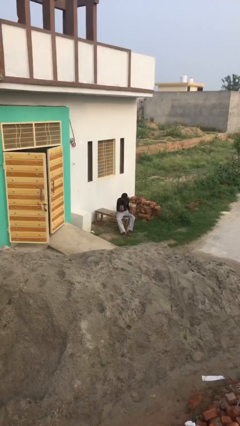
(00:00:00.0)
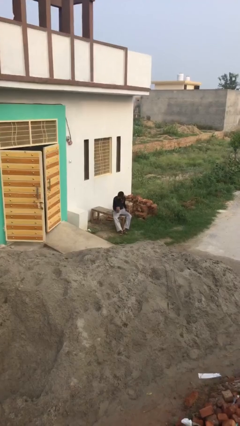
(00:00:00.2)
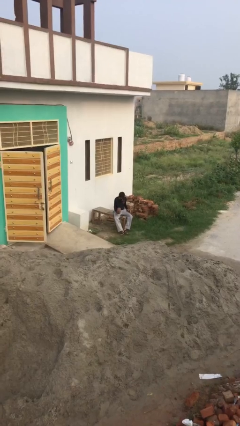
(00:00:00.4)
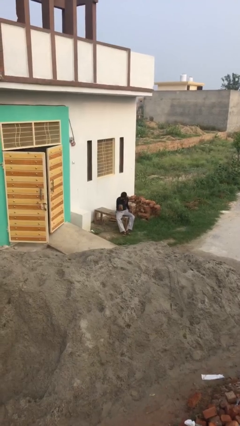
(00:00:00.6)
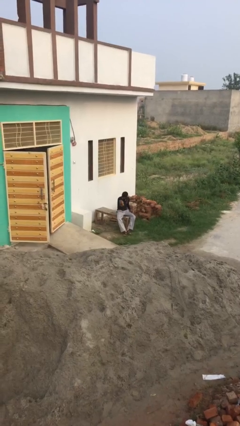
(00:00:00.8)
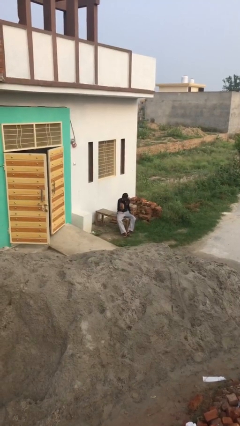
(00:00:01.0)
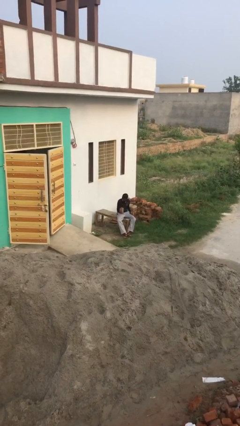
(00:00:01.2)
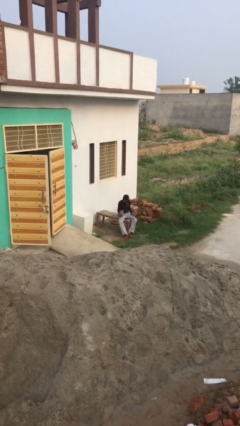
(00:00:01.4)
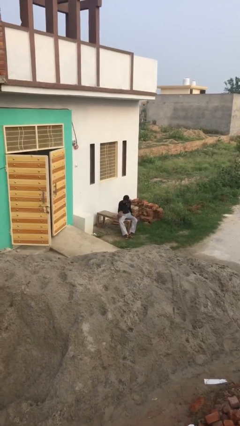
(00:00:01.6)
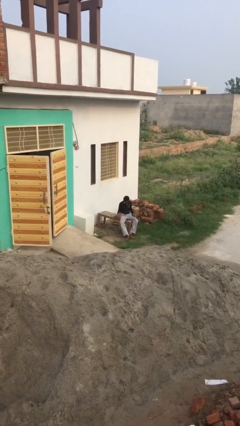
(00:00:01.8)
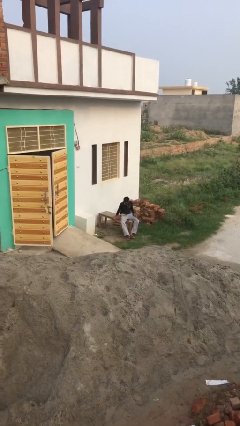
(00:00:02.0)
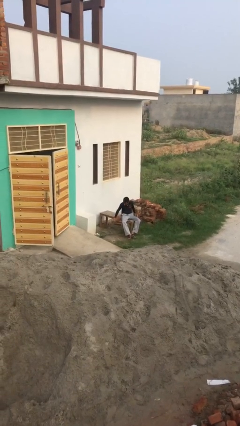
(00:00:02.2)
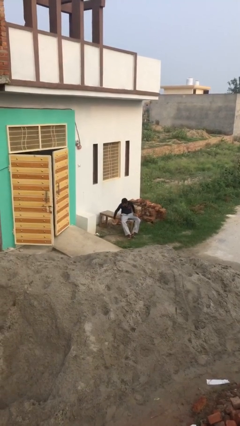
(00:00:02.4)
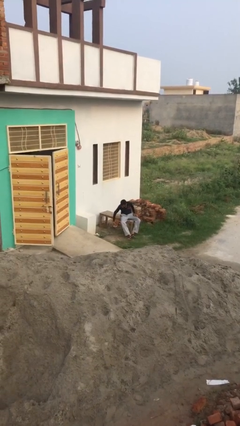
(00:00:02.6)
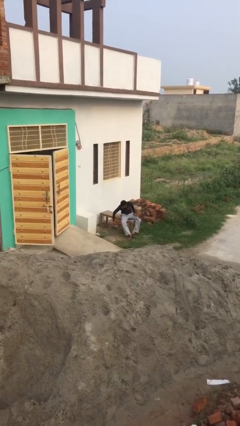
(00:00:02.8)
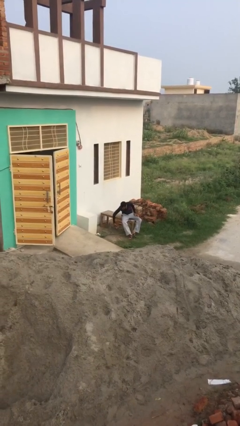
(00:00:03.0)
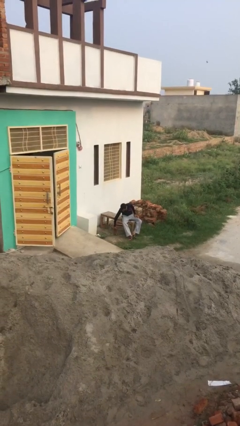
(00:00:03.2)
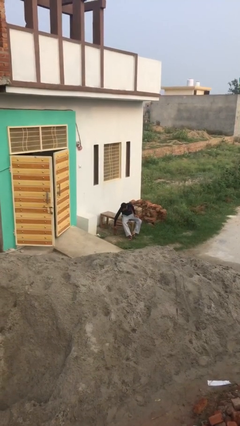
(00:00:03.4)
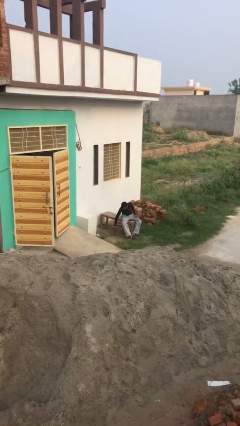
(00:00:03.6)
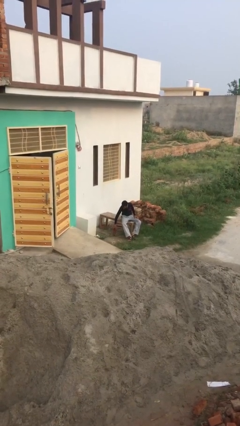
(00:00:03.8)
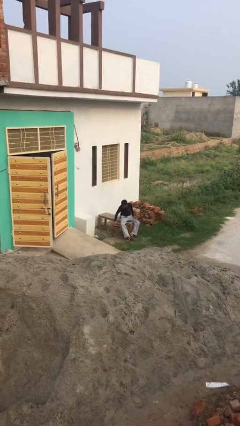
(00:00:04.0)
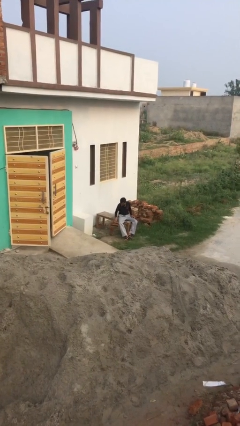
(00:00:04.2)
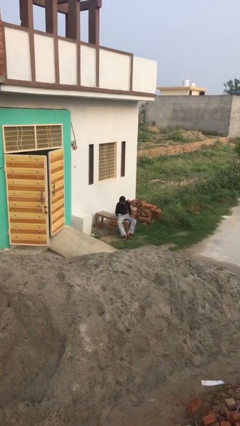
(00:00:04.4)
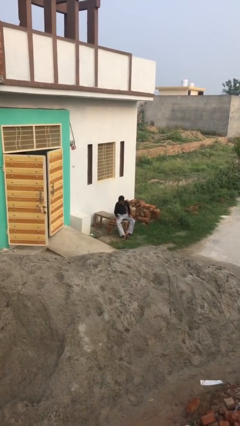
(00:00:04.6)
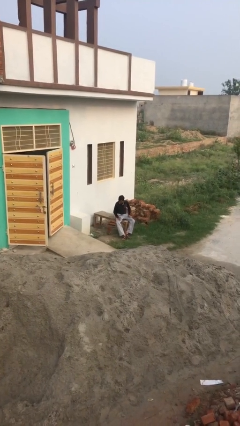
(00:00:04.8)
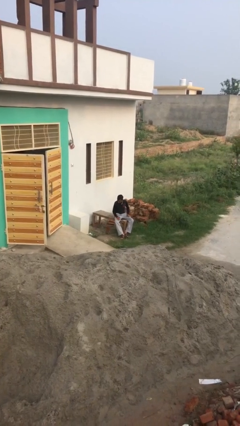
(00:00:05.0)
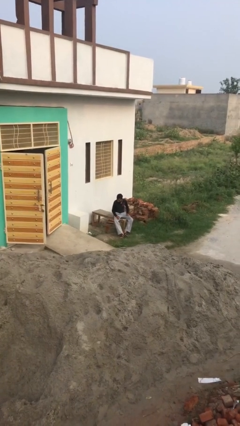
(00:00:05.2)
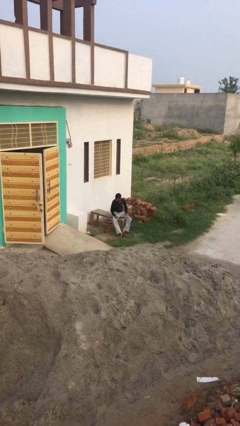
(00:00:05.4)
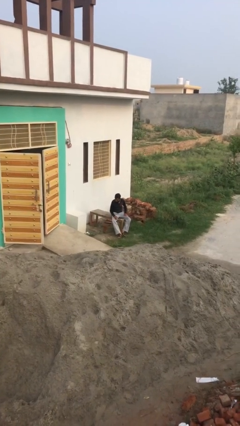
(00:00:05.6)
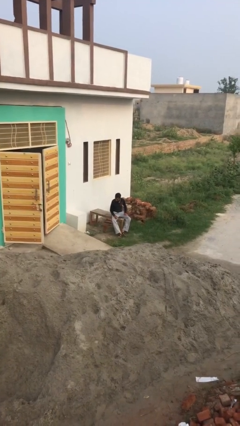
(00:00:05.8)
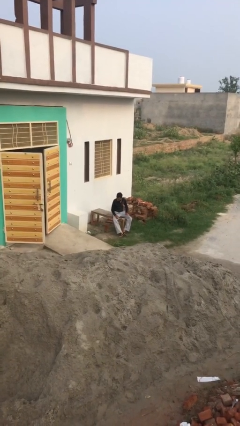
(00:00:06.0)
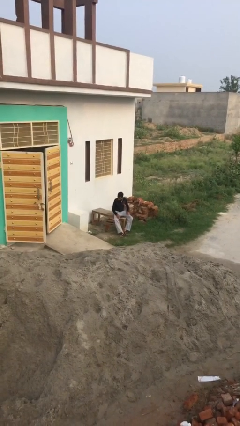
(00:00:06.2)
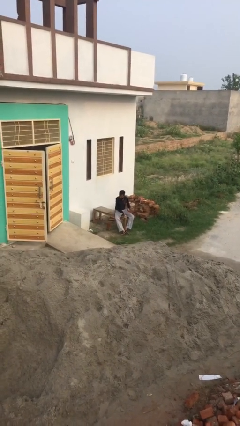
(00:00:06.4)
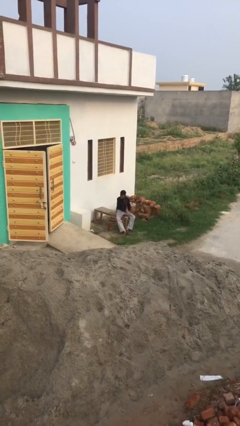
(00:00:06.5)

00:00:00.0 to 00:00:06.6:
person puts down object on floor

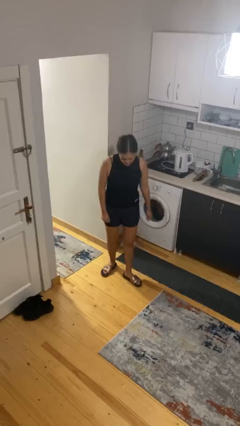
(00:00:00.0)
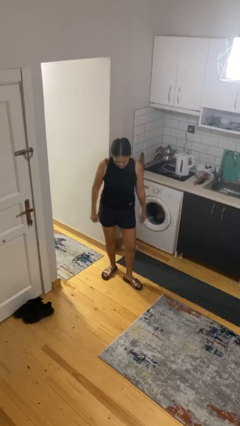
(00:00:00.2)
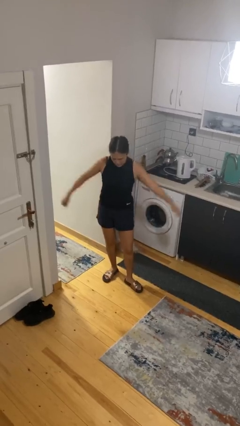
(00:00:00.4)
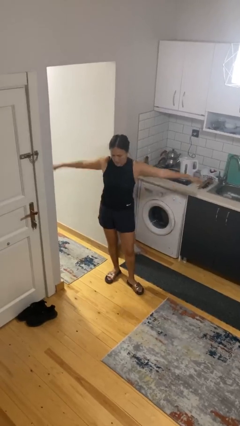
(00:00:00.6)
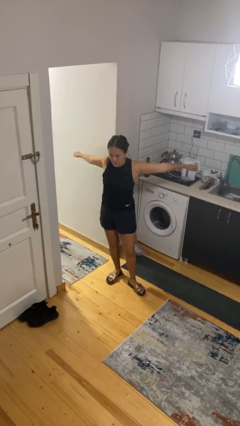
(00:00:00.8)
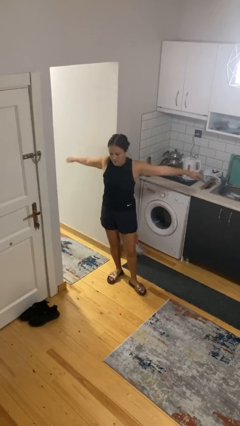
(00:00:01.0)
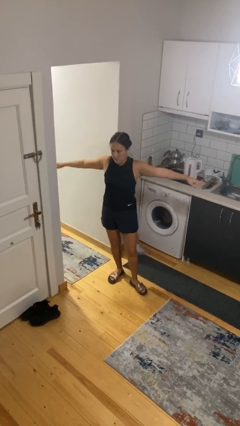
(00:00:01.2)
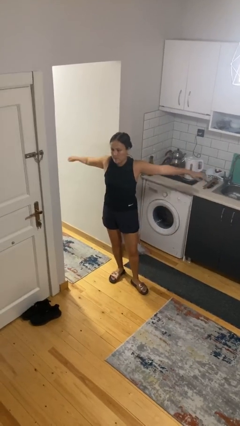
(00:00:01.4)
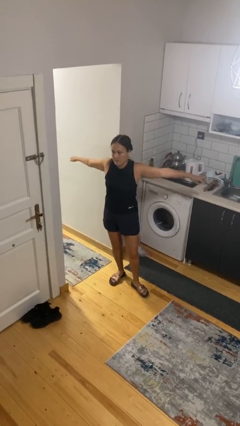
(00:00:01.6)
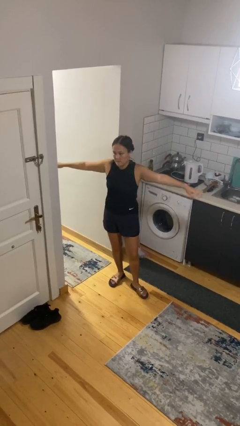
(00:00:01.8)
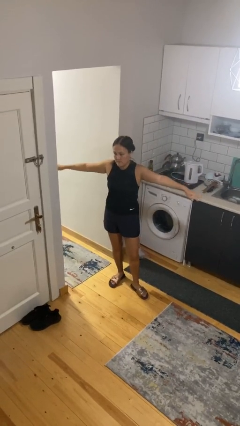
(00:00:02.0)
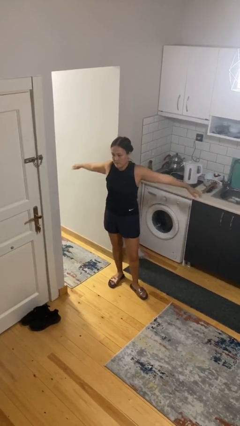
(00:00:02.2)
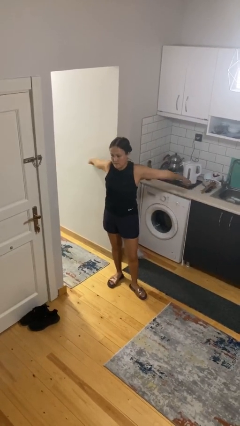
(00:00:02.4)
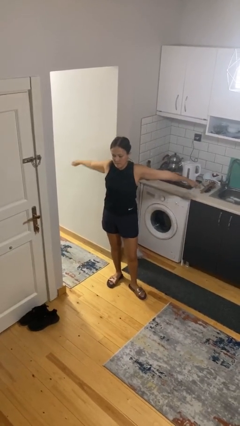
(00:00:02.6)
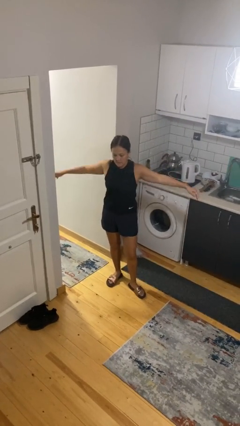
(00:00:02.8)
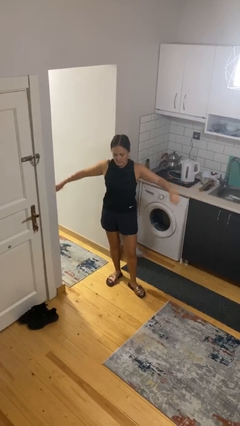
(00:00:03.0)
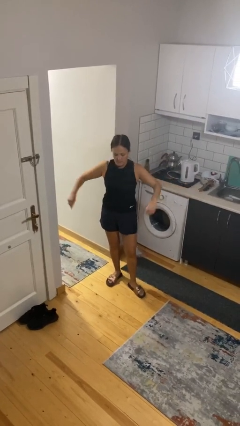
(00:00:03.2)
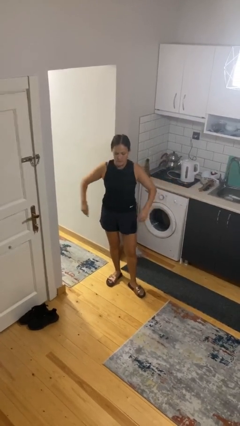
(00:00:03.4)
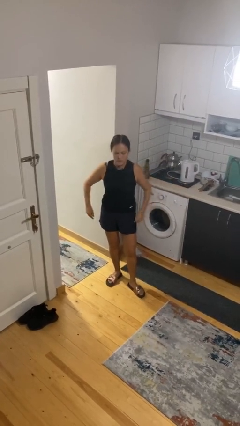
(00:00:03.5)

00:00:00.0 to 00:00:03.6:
person stretches arms to side

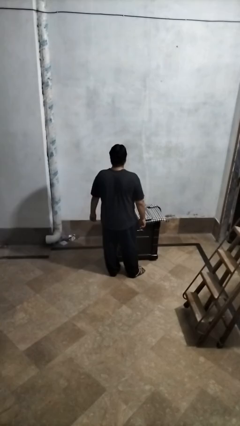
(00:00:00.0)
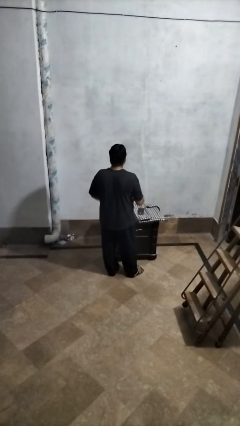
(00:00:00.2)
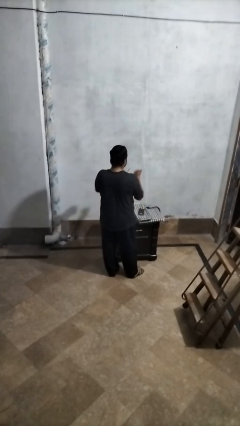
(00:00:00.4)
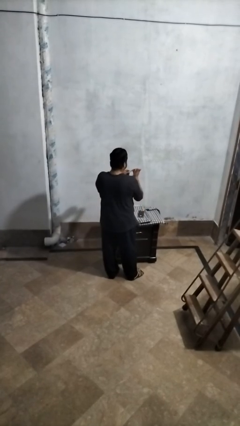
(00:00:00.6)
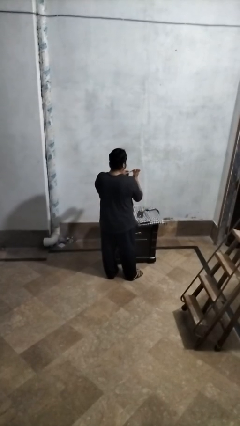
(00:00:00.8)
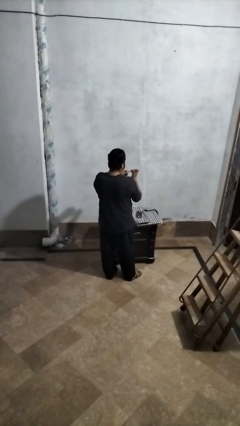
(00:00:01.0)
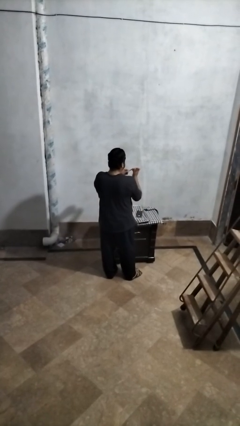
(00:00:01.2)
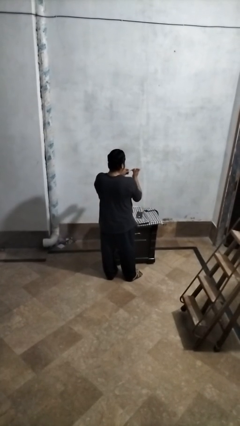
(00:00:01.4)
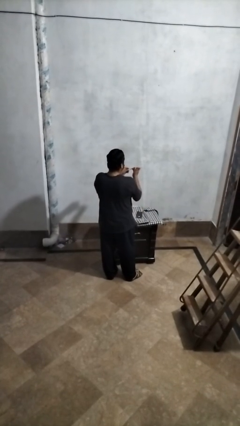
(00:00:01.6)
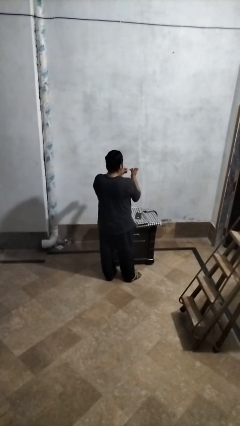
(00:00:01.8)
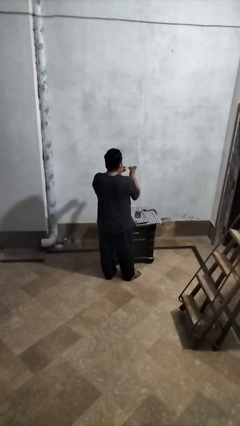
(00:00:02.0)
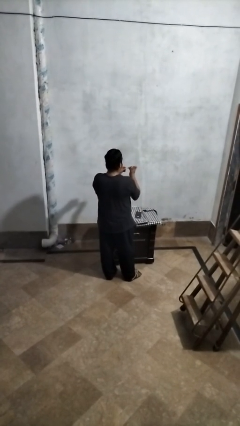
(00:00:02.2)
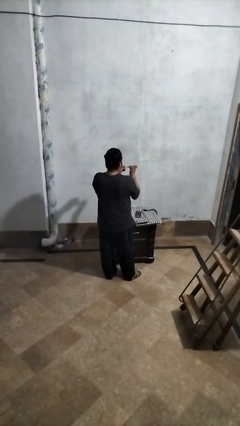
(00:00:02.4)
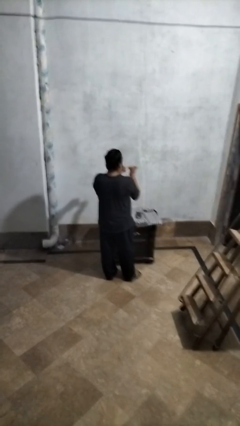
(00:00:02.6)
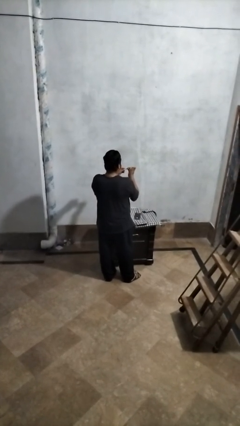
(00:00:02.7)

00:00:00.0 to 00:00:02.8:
person files fingernails

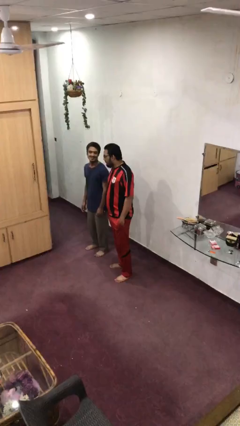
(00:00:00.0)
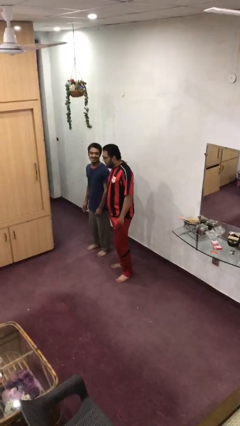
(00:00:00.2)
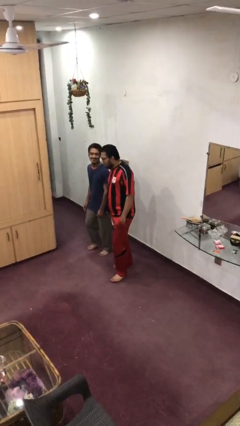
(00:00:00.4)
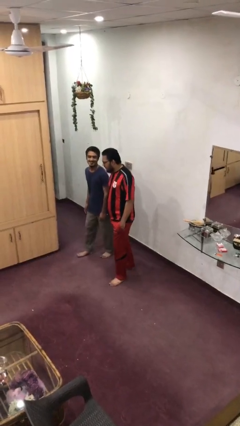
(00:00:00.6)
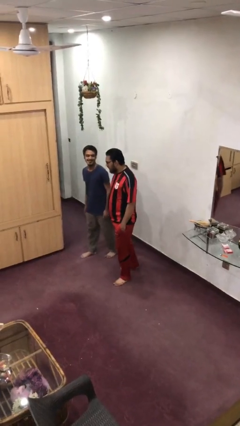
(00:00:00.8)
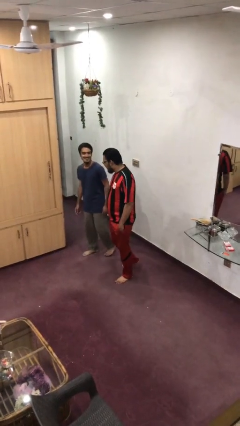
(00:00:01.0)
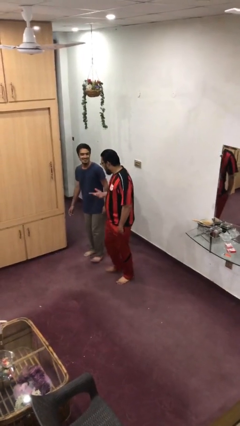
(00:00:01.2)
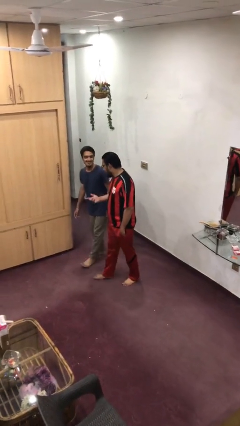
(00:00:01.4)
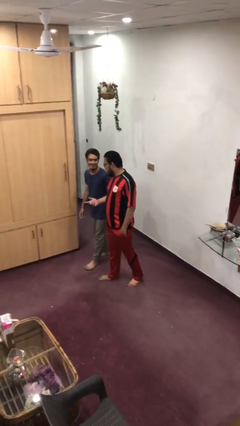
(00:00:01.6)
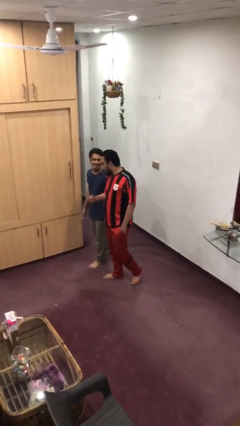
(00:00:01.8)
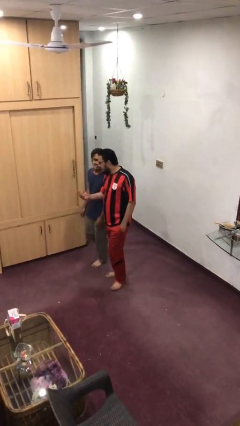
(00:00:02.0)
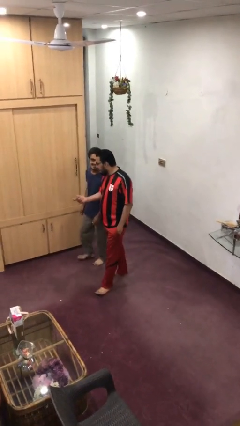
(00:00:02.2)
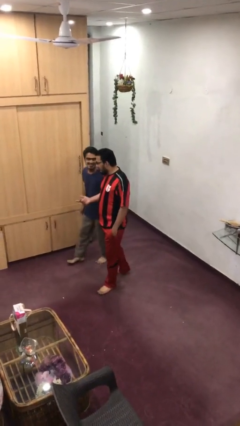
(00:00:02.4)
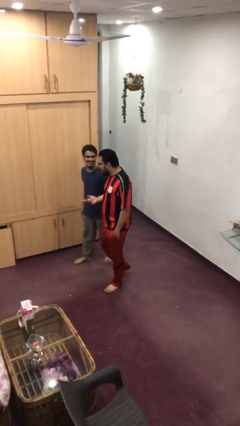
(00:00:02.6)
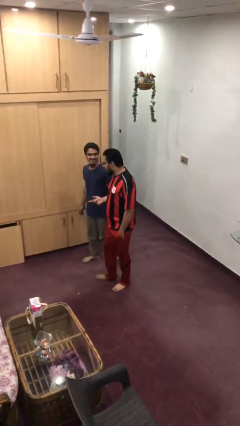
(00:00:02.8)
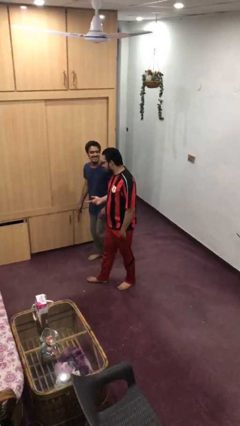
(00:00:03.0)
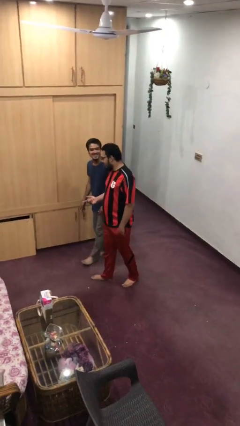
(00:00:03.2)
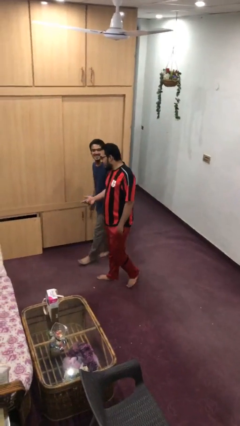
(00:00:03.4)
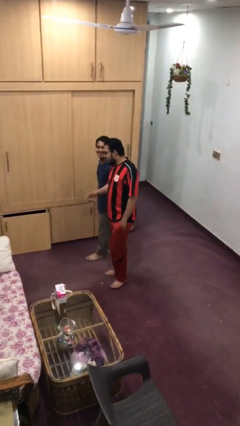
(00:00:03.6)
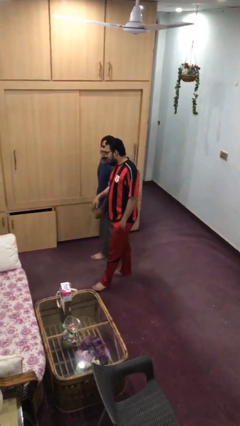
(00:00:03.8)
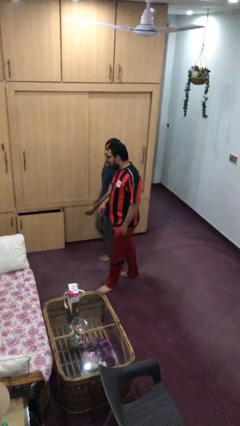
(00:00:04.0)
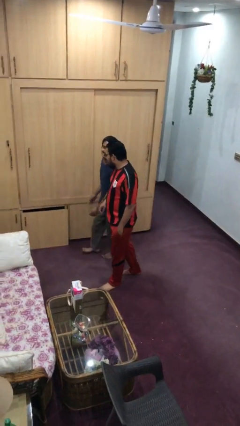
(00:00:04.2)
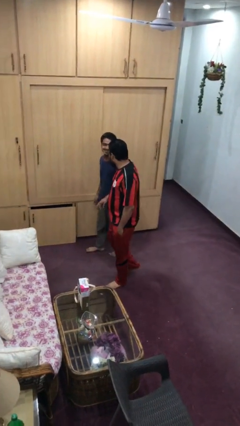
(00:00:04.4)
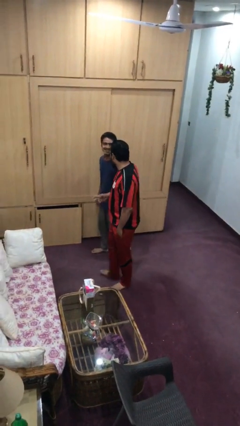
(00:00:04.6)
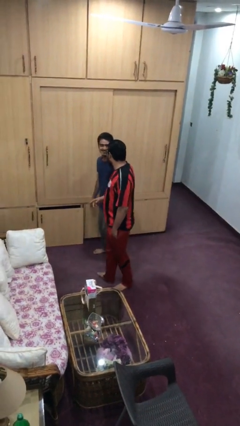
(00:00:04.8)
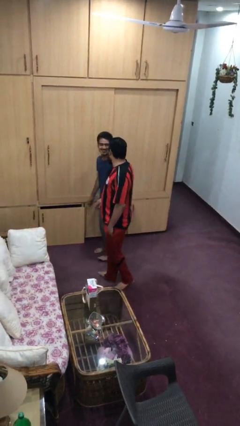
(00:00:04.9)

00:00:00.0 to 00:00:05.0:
person talks to person
